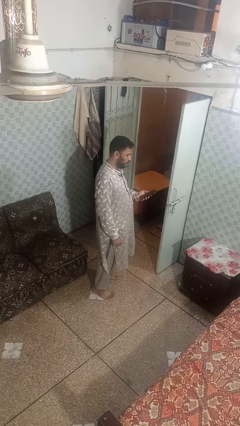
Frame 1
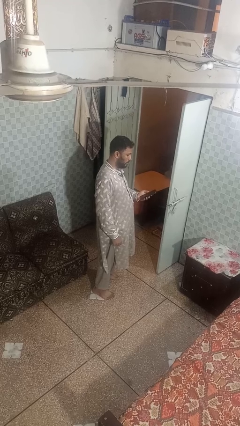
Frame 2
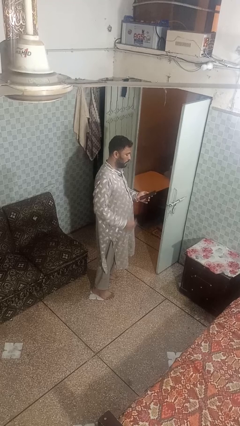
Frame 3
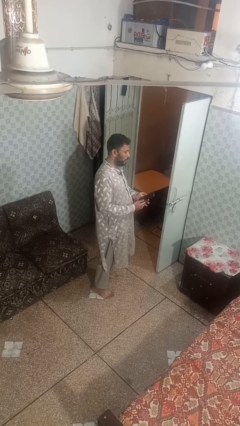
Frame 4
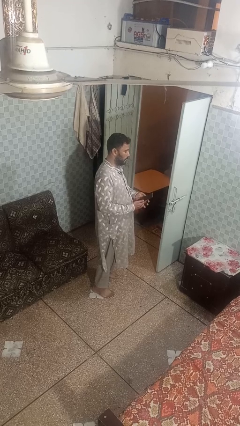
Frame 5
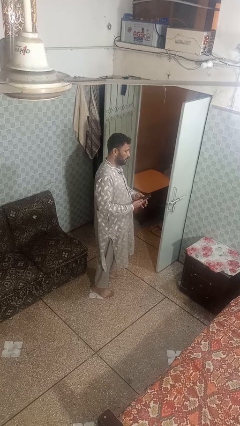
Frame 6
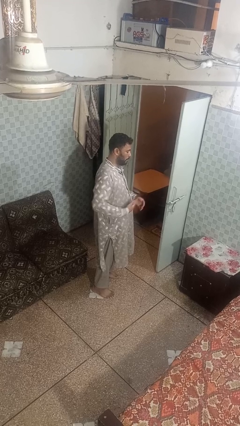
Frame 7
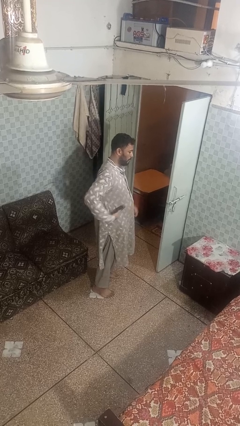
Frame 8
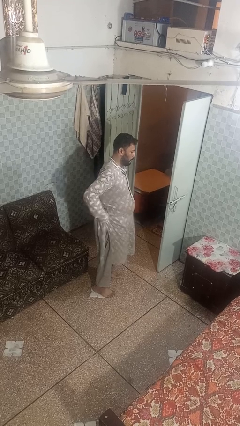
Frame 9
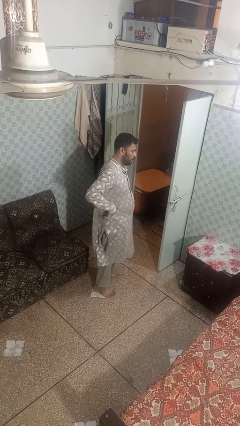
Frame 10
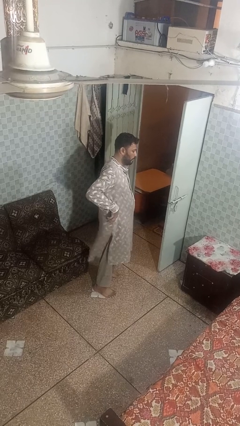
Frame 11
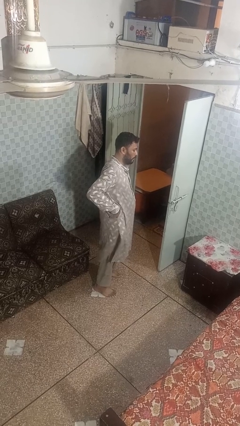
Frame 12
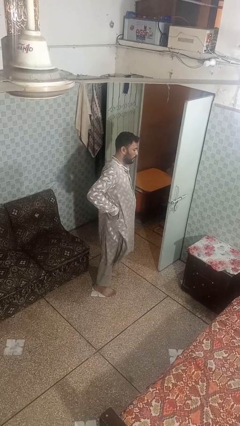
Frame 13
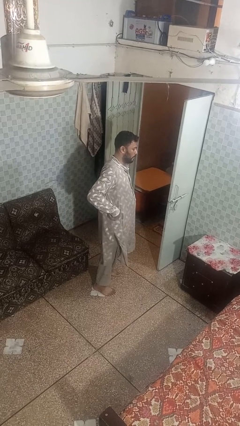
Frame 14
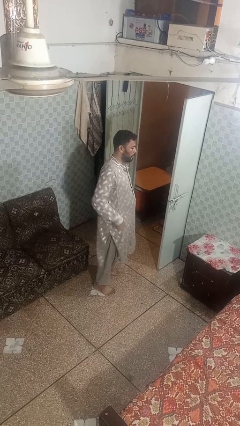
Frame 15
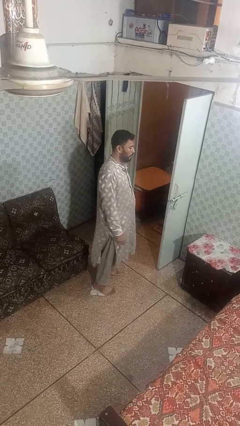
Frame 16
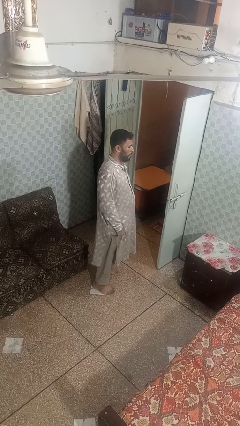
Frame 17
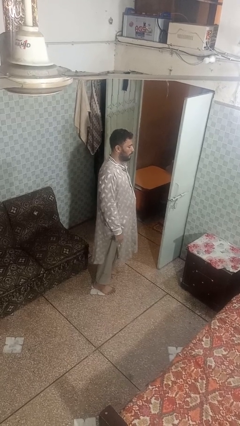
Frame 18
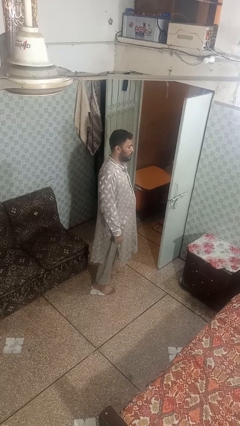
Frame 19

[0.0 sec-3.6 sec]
person puts phone into pocket

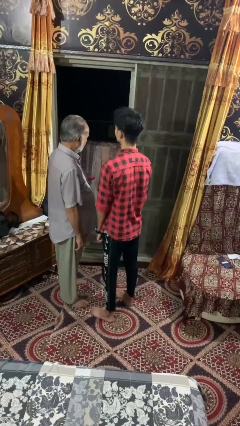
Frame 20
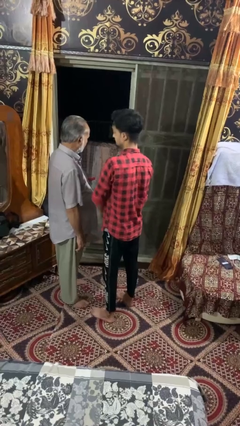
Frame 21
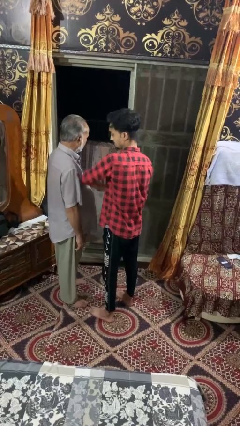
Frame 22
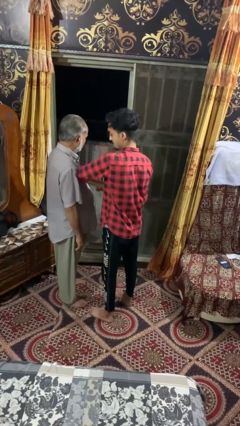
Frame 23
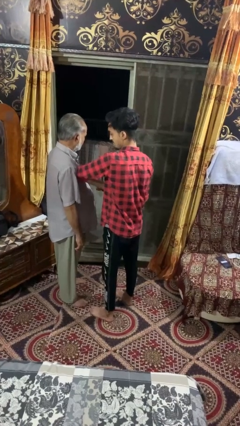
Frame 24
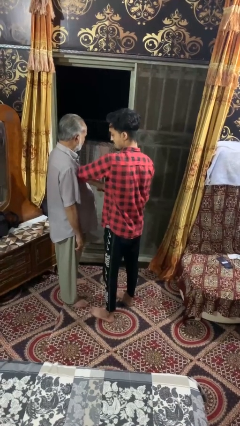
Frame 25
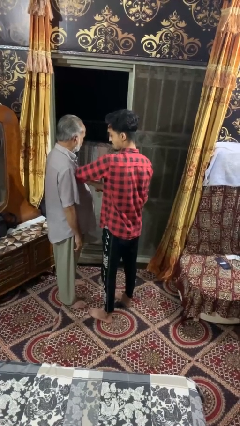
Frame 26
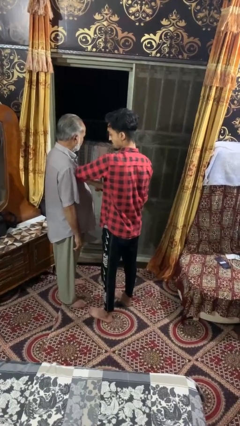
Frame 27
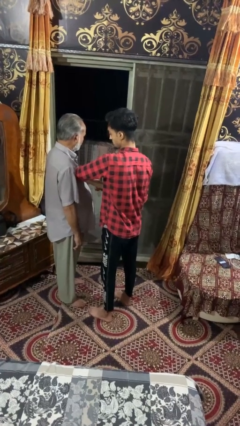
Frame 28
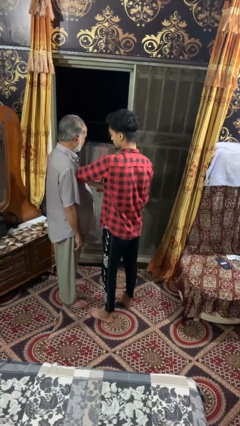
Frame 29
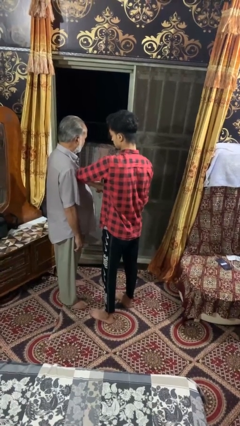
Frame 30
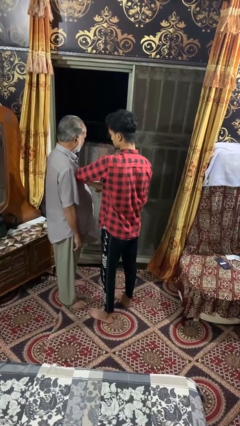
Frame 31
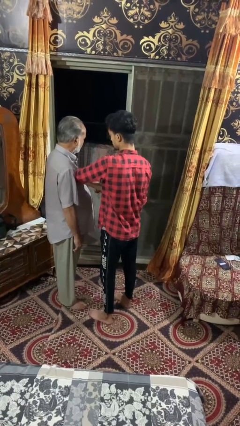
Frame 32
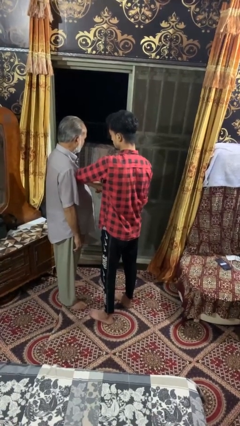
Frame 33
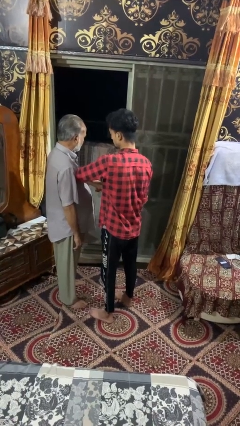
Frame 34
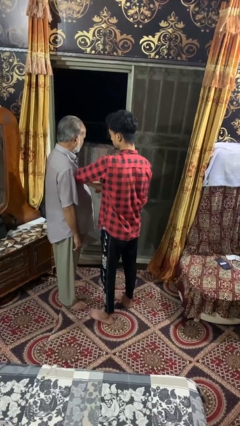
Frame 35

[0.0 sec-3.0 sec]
person nudges person with elbow

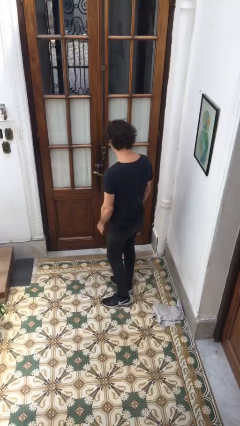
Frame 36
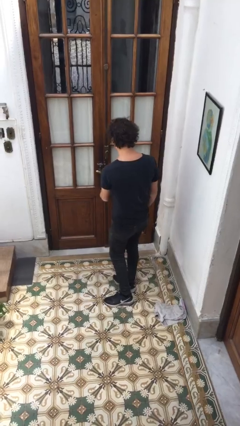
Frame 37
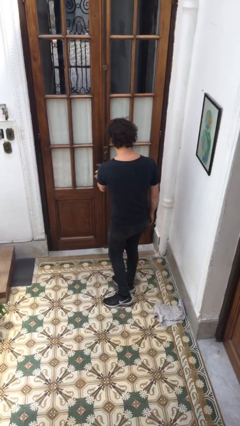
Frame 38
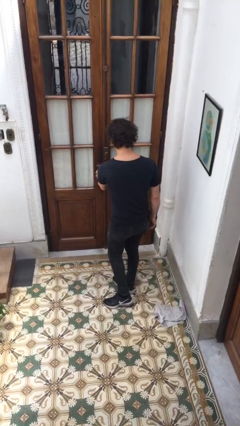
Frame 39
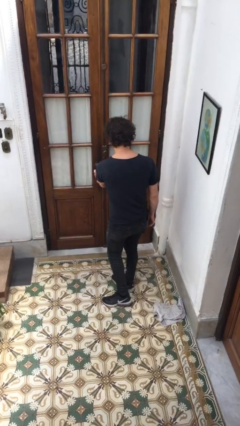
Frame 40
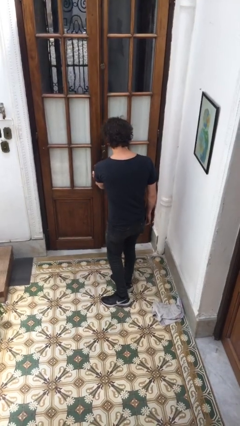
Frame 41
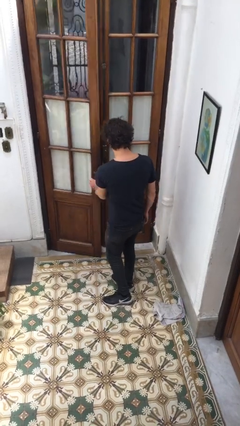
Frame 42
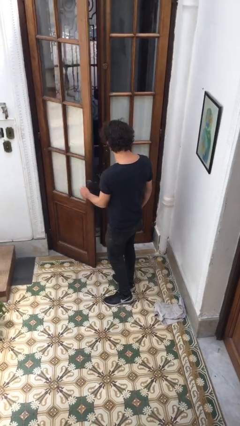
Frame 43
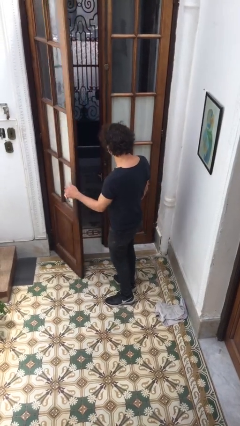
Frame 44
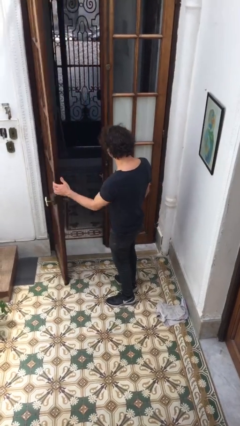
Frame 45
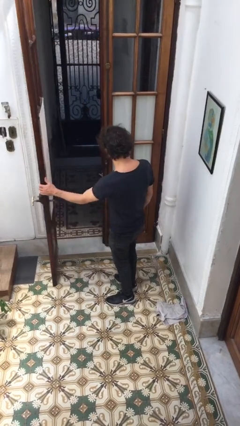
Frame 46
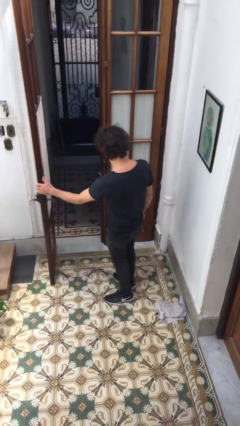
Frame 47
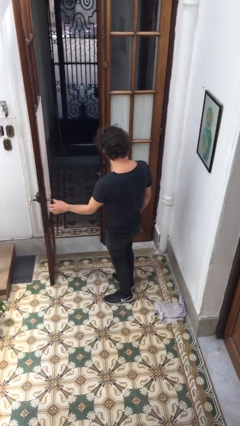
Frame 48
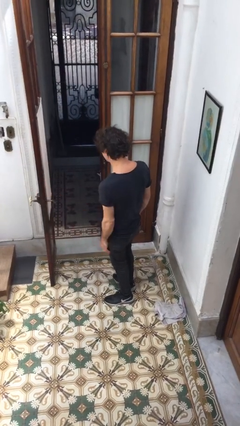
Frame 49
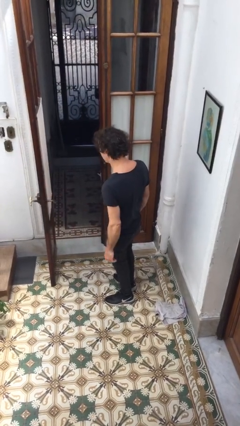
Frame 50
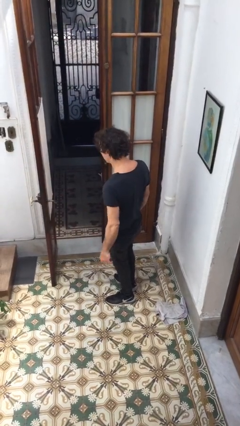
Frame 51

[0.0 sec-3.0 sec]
person opens facility door

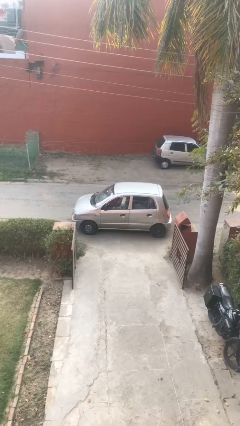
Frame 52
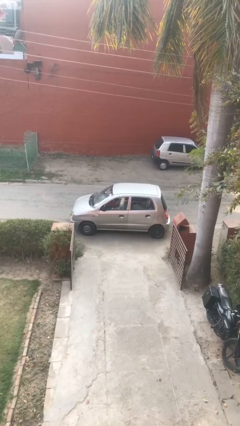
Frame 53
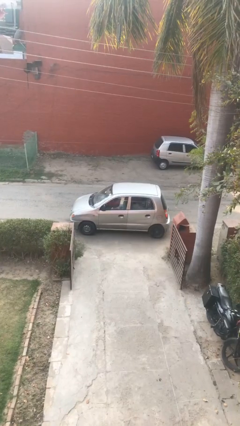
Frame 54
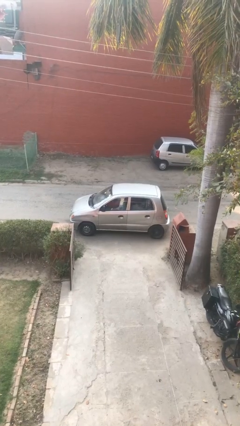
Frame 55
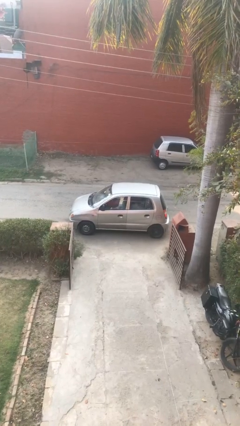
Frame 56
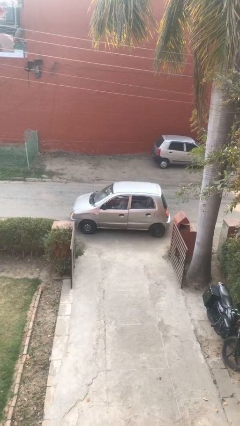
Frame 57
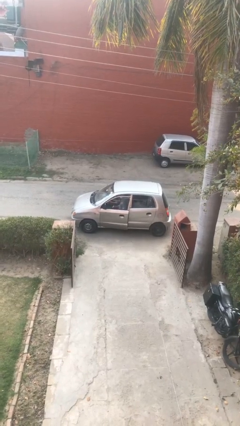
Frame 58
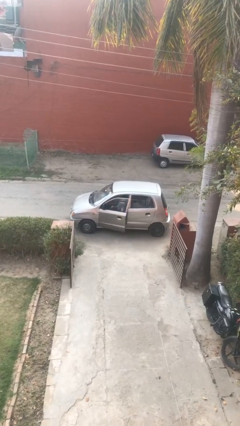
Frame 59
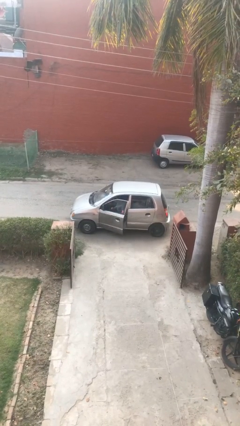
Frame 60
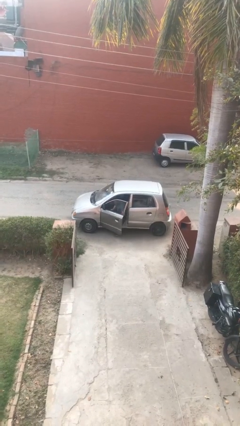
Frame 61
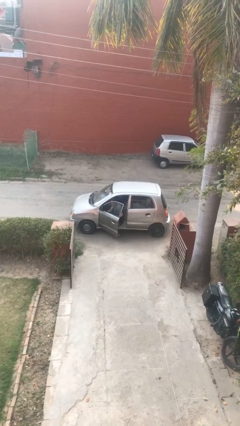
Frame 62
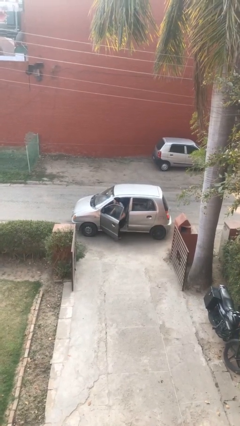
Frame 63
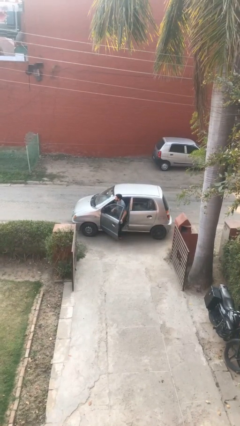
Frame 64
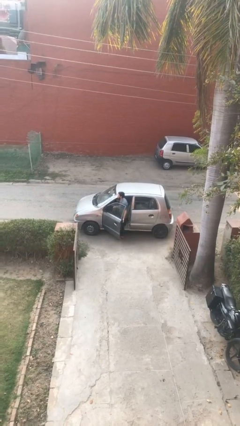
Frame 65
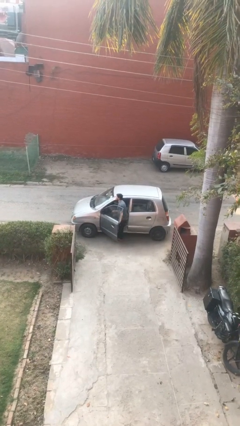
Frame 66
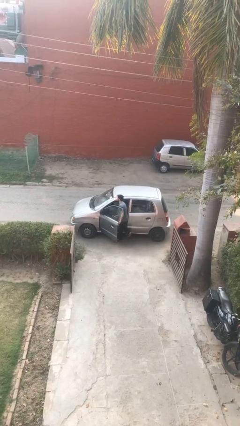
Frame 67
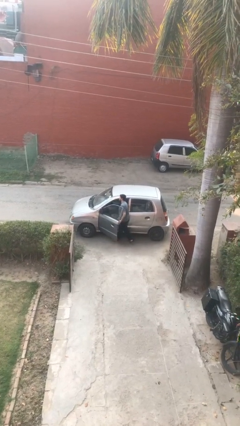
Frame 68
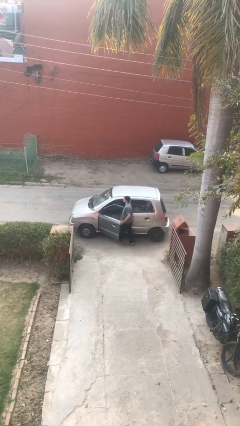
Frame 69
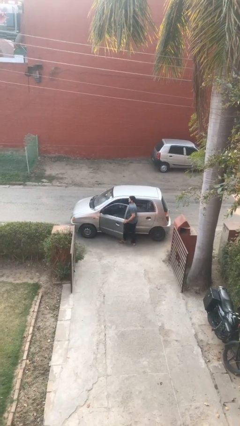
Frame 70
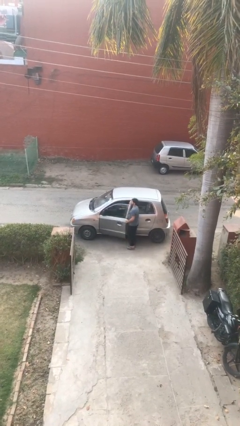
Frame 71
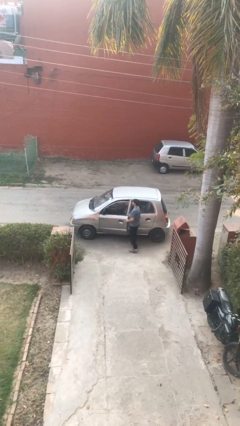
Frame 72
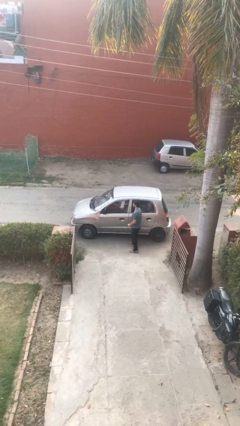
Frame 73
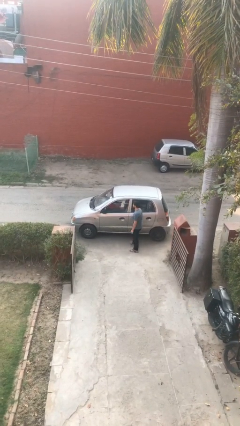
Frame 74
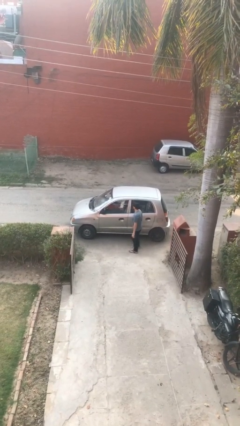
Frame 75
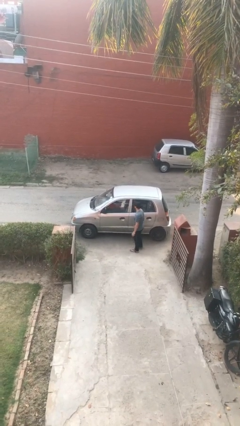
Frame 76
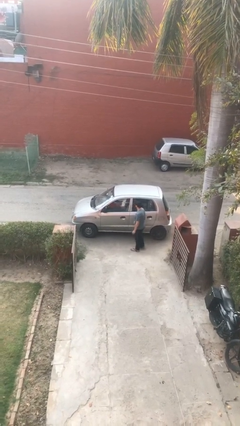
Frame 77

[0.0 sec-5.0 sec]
car drops off person

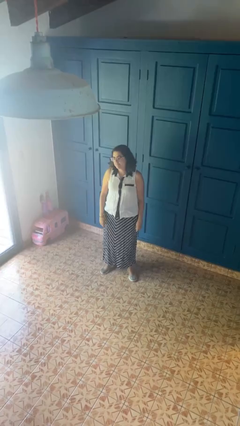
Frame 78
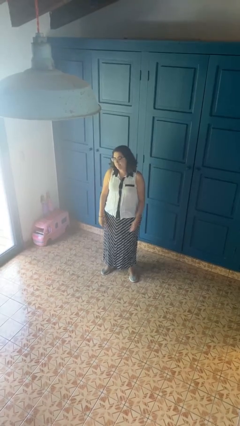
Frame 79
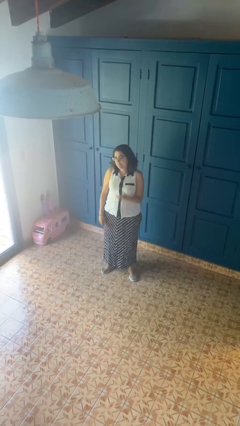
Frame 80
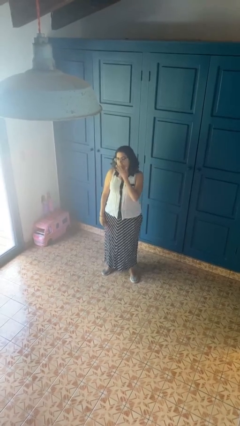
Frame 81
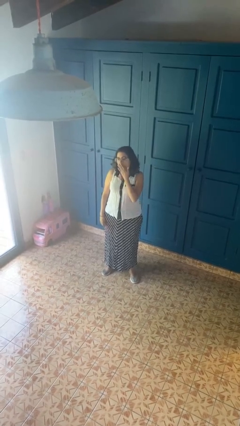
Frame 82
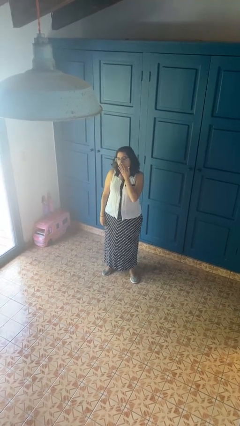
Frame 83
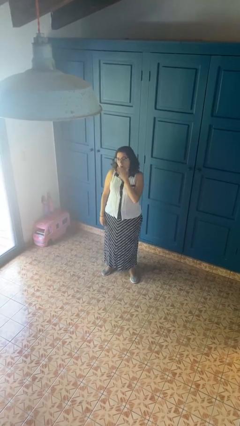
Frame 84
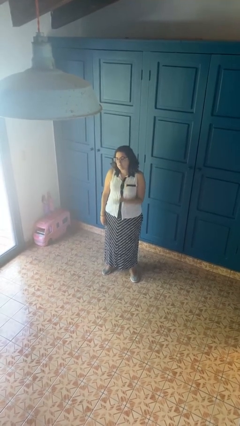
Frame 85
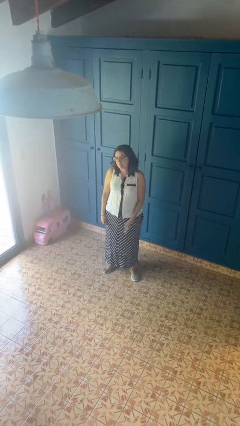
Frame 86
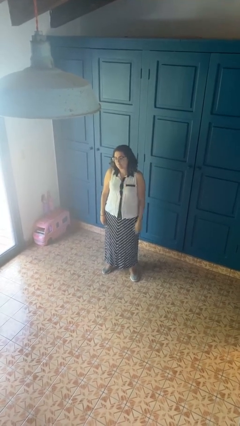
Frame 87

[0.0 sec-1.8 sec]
person yawns

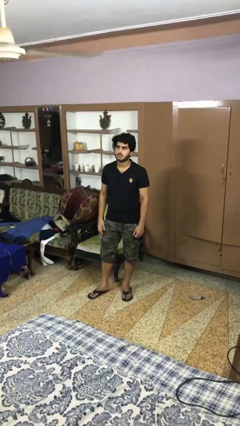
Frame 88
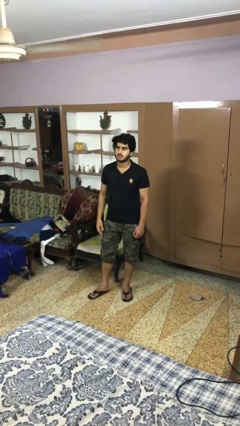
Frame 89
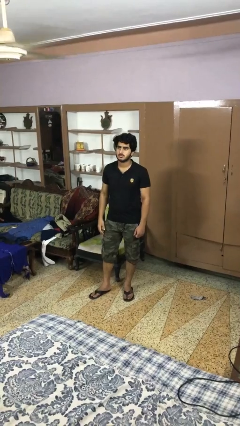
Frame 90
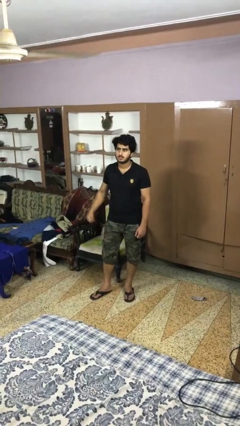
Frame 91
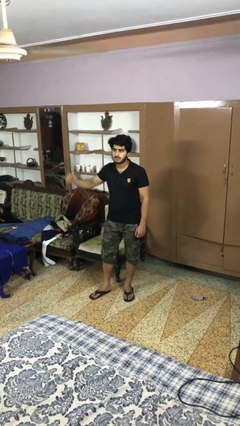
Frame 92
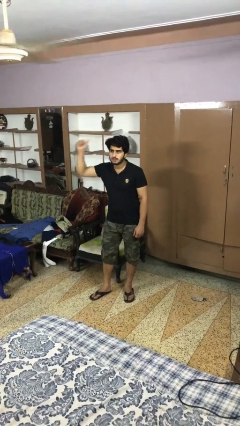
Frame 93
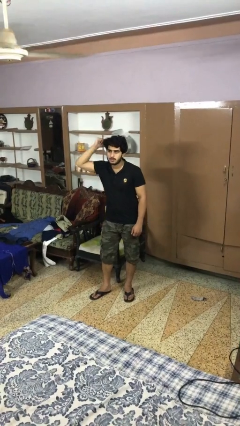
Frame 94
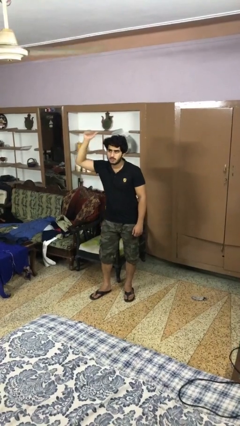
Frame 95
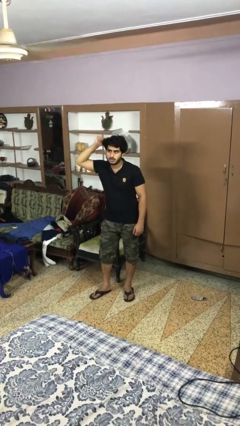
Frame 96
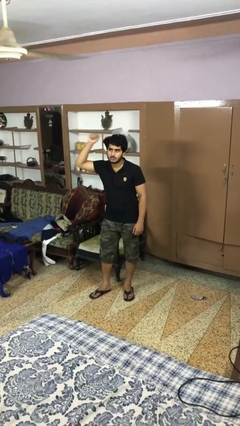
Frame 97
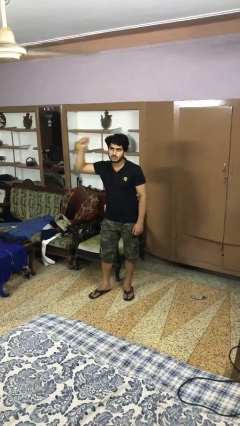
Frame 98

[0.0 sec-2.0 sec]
person gestures behind me
